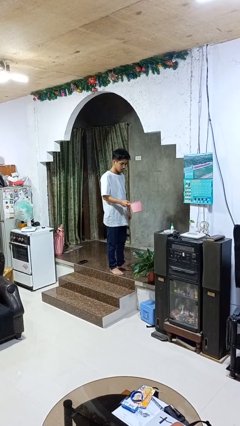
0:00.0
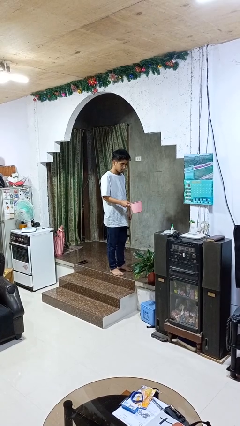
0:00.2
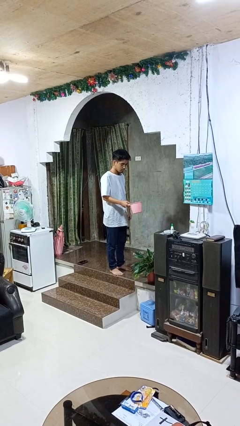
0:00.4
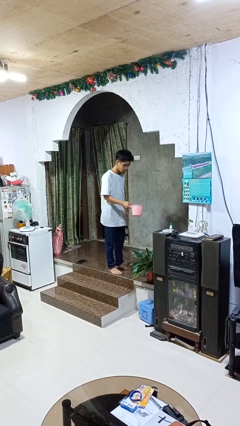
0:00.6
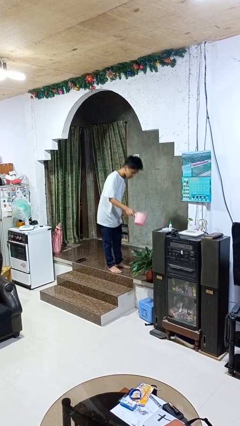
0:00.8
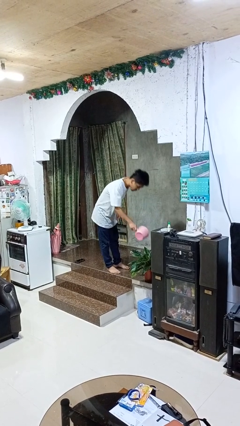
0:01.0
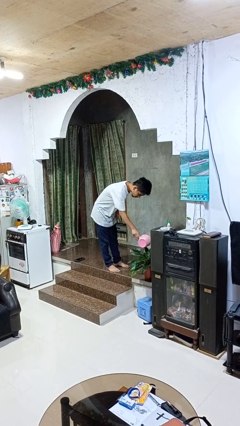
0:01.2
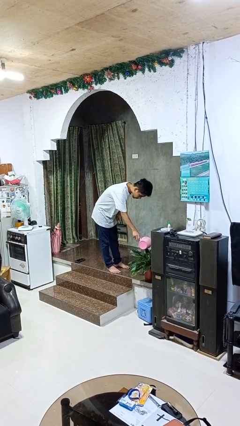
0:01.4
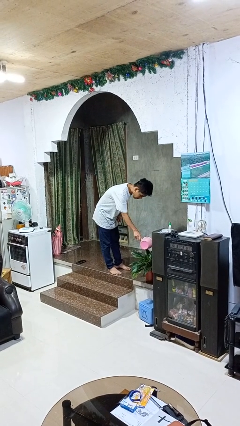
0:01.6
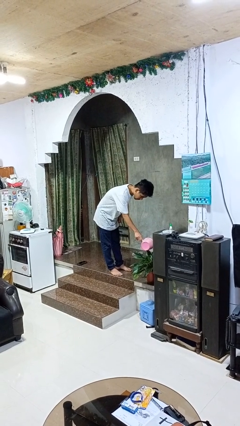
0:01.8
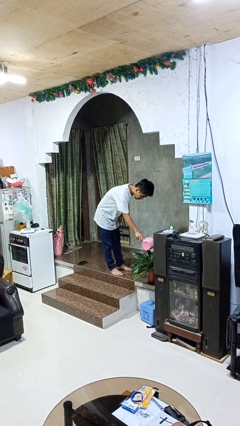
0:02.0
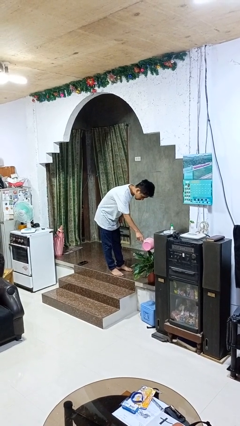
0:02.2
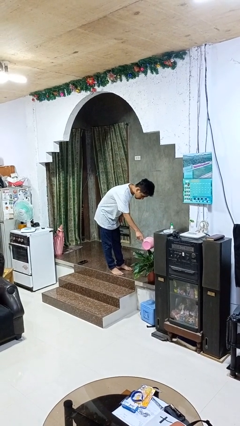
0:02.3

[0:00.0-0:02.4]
person waters houseplant

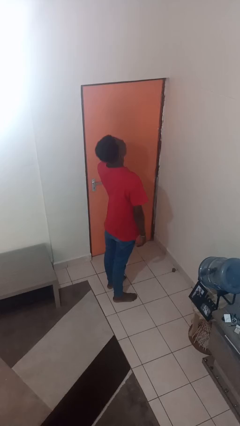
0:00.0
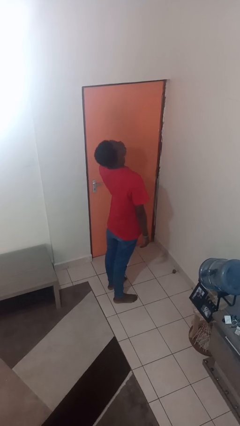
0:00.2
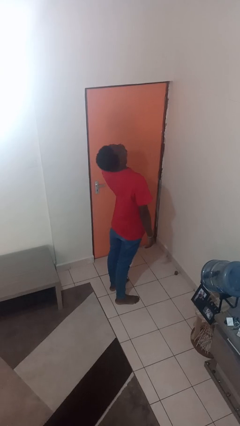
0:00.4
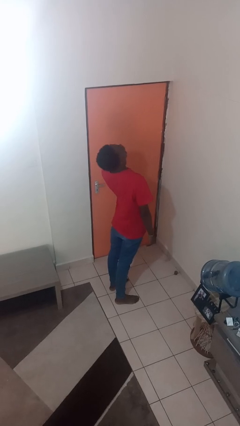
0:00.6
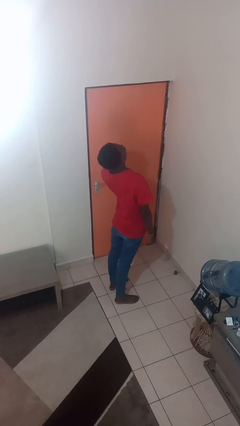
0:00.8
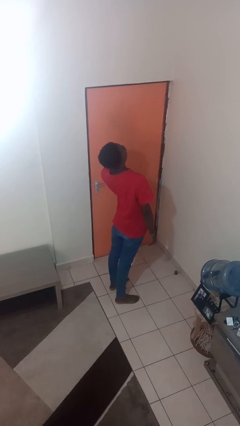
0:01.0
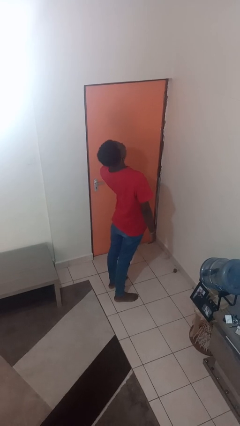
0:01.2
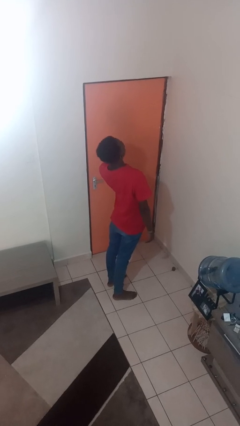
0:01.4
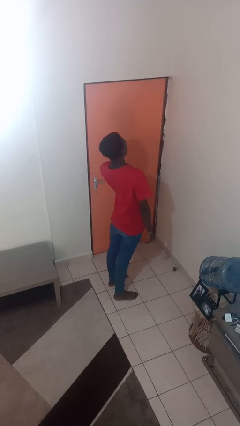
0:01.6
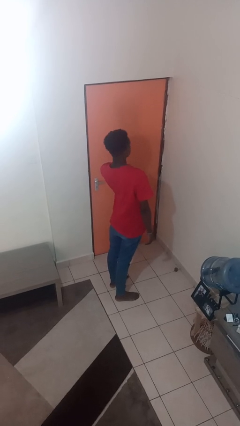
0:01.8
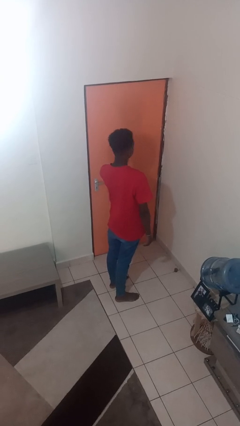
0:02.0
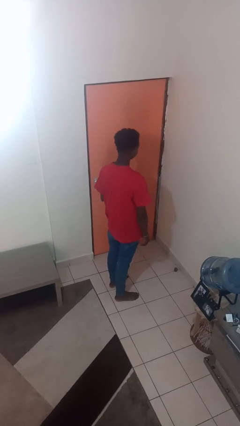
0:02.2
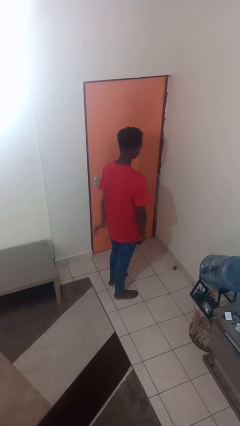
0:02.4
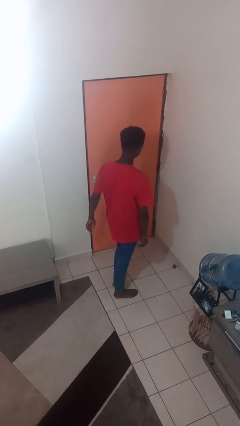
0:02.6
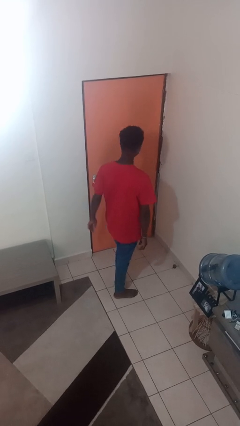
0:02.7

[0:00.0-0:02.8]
person yawns

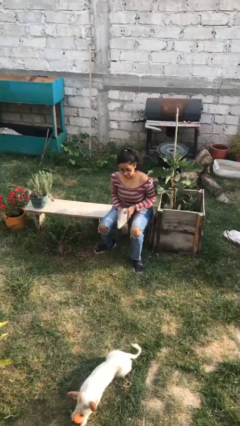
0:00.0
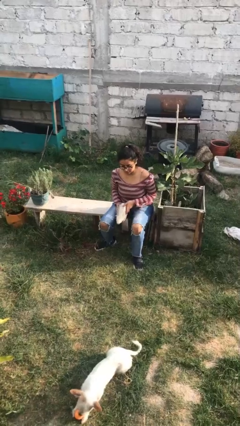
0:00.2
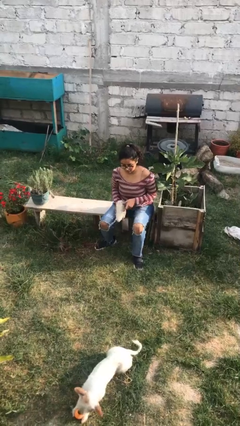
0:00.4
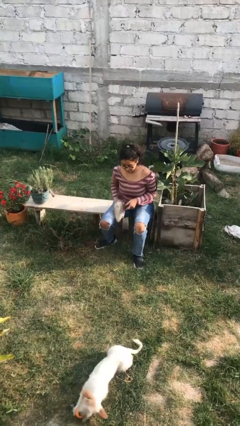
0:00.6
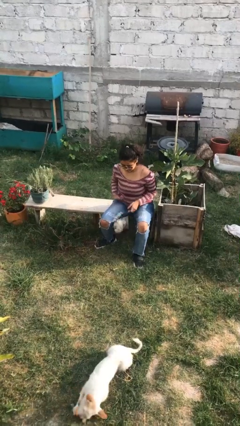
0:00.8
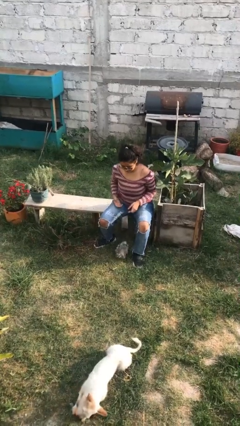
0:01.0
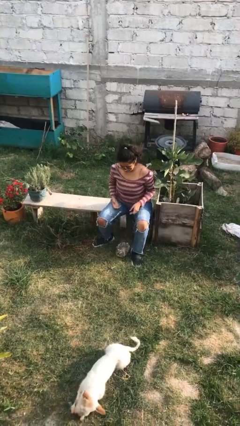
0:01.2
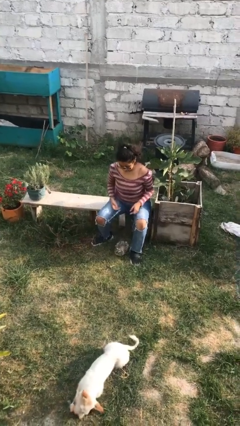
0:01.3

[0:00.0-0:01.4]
person drops object

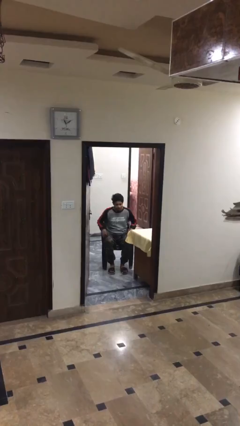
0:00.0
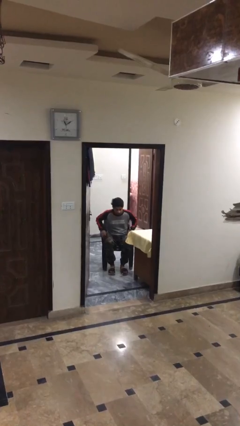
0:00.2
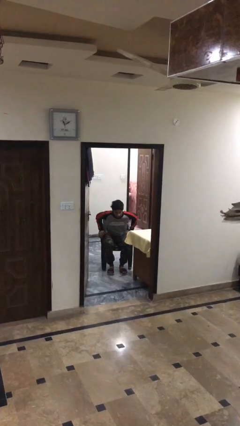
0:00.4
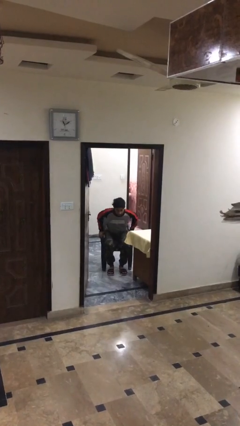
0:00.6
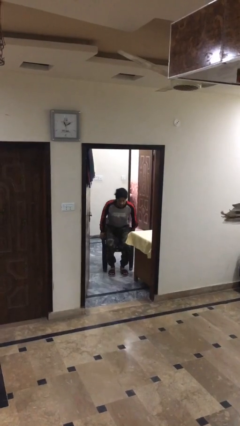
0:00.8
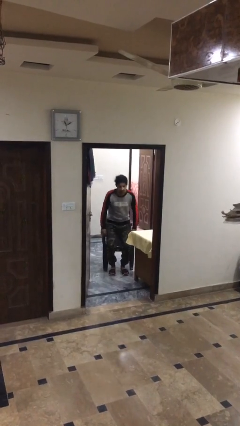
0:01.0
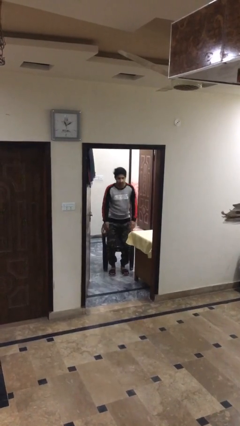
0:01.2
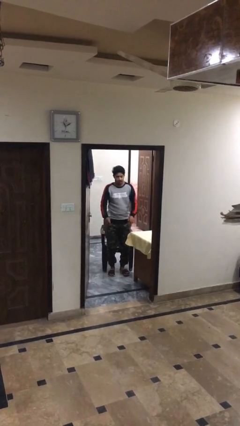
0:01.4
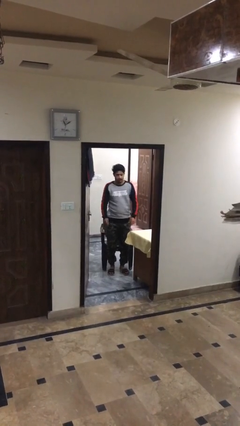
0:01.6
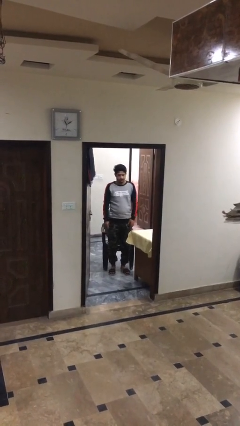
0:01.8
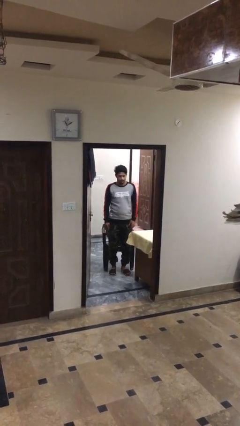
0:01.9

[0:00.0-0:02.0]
person stands up

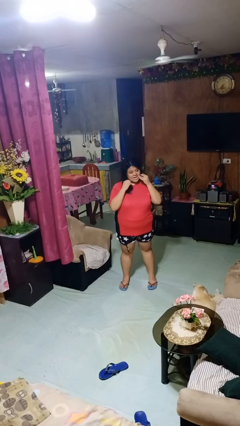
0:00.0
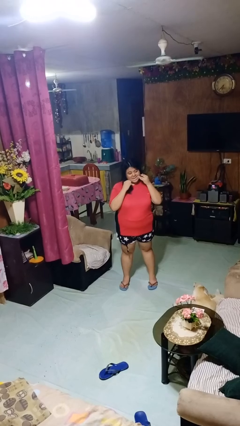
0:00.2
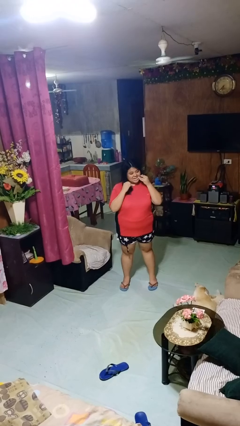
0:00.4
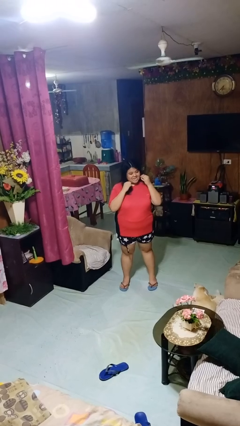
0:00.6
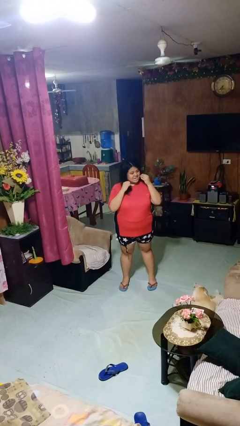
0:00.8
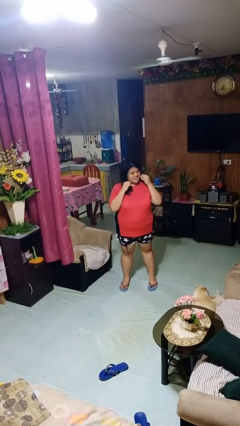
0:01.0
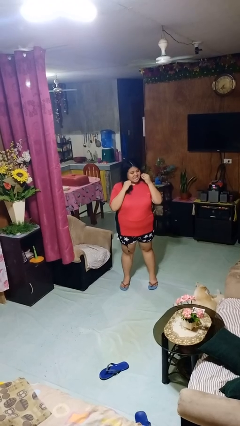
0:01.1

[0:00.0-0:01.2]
person flosses

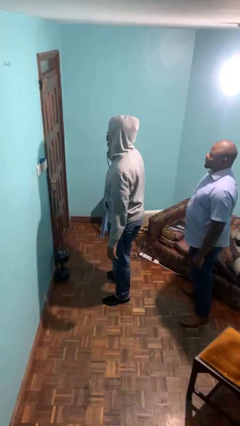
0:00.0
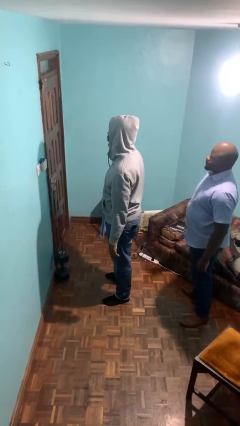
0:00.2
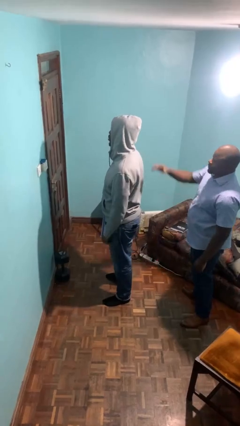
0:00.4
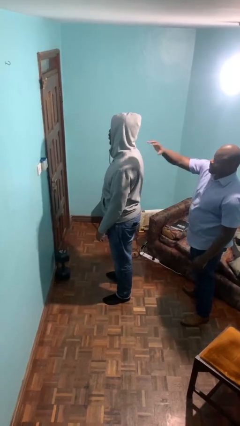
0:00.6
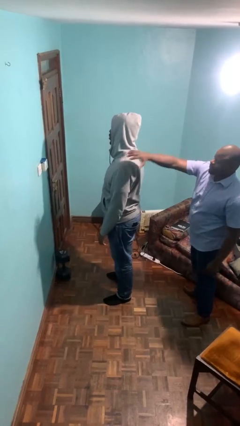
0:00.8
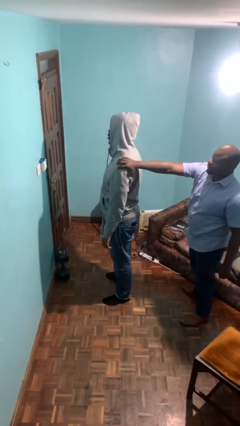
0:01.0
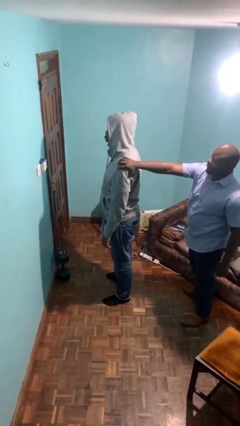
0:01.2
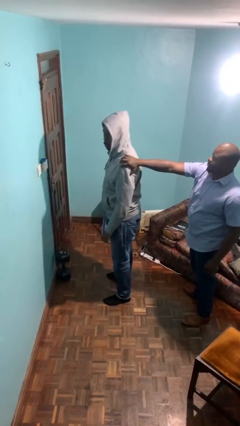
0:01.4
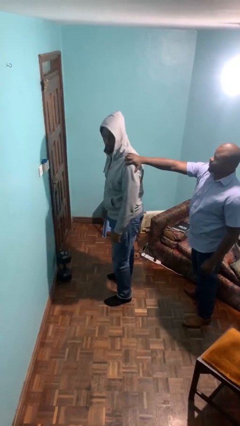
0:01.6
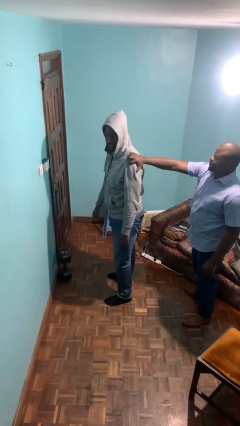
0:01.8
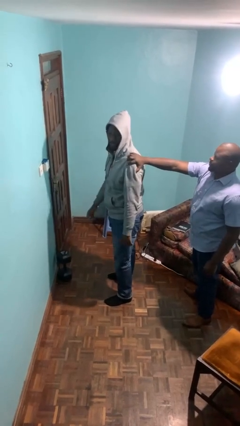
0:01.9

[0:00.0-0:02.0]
person grabs person by shoulder

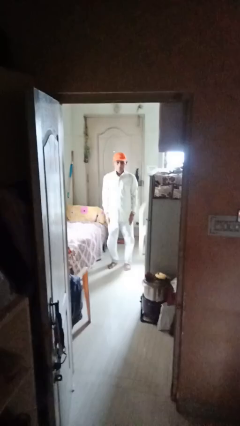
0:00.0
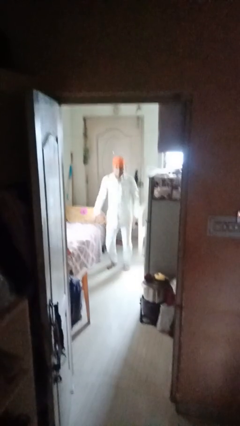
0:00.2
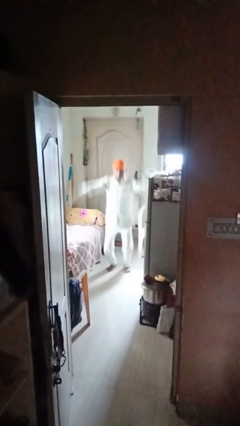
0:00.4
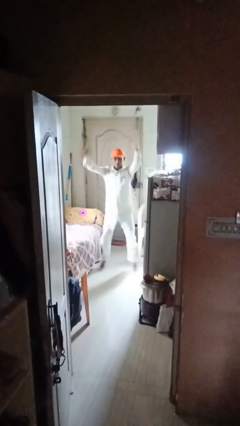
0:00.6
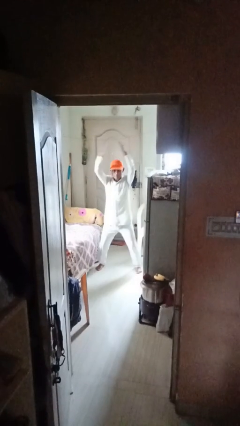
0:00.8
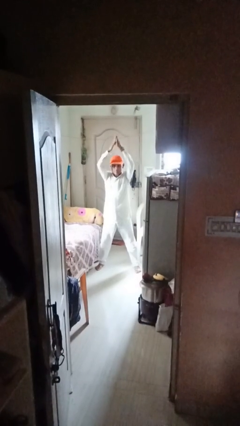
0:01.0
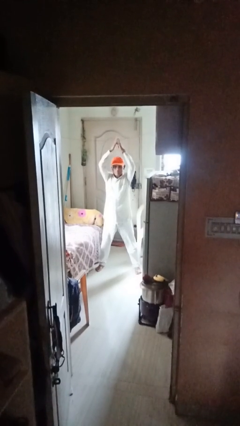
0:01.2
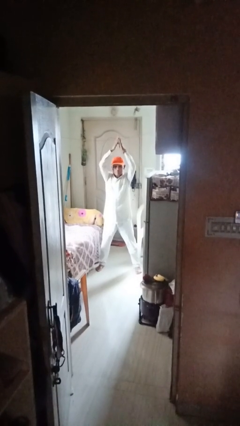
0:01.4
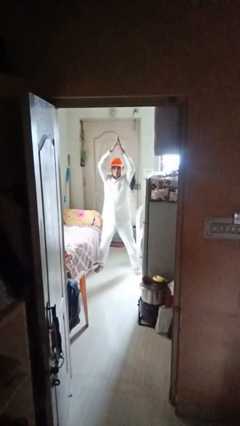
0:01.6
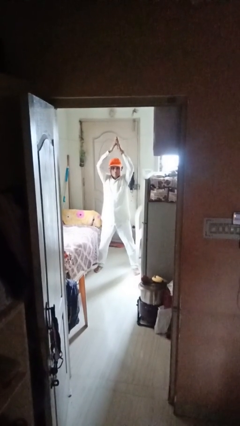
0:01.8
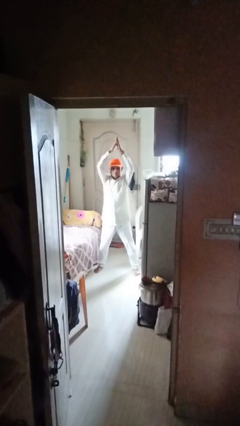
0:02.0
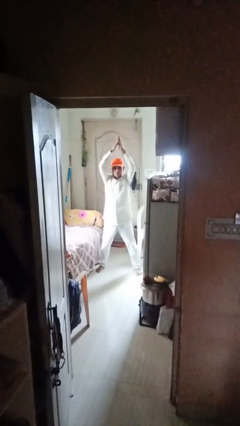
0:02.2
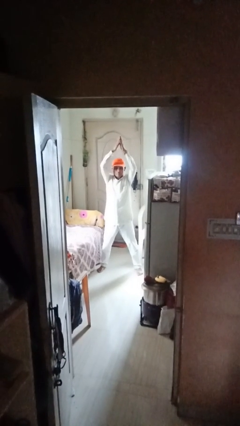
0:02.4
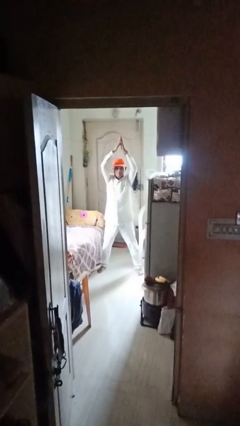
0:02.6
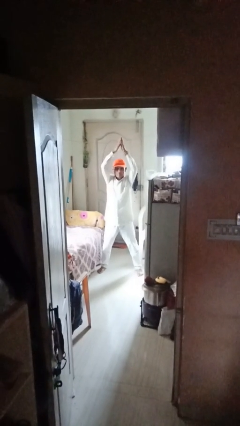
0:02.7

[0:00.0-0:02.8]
person exercises with jumping jacks

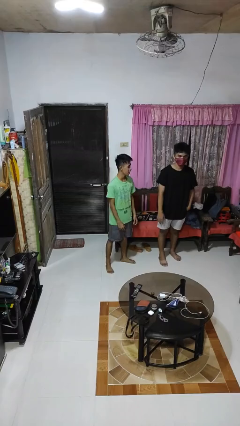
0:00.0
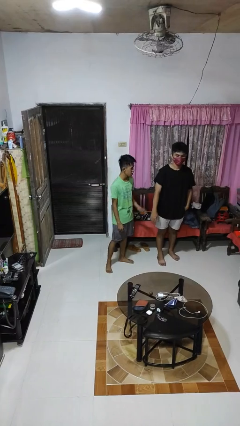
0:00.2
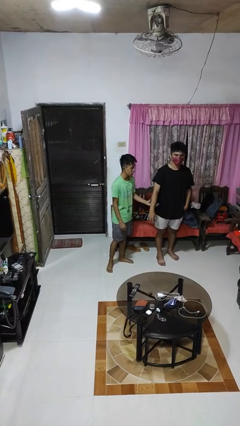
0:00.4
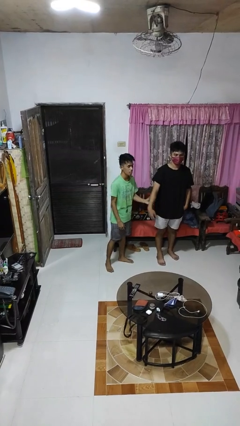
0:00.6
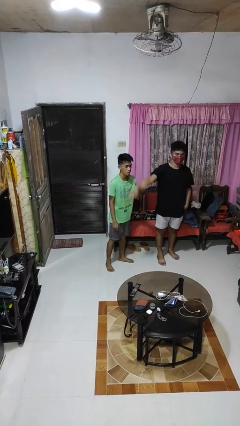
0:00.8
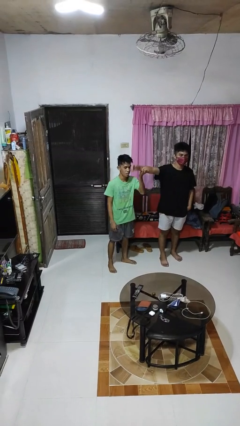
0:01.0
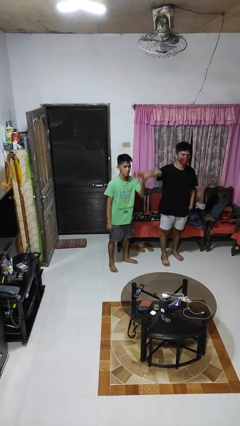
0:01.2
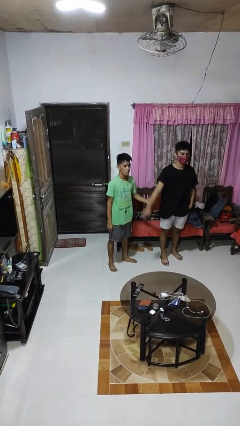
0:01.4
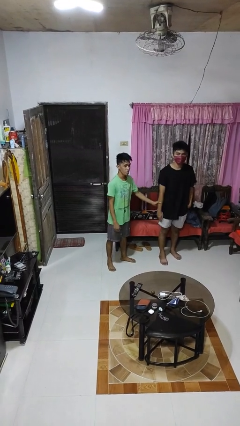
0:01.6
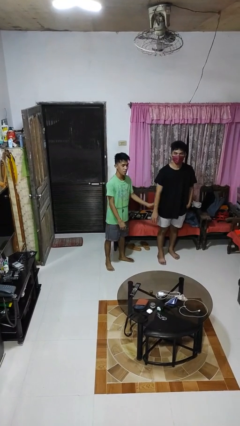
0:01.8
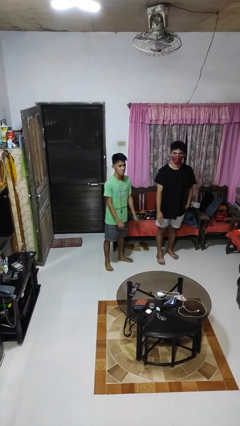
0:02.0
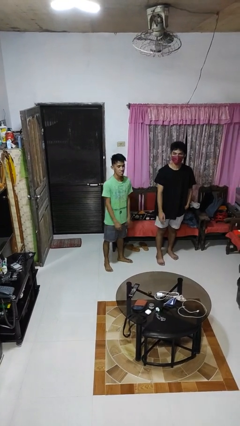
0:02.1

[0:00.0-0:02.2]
person grabs person by forearm

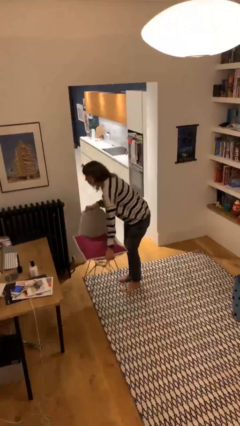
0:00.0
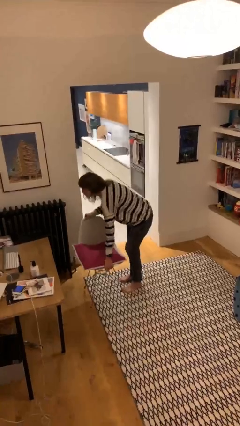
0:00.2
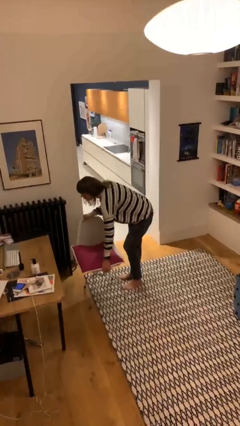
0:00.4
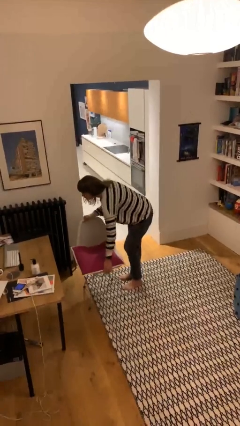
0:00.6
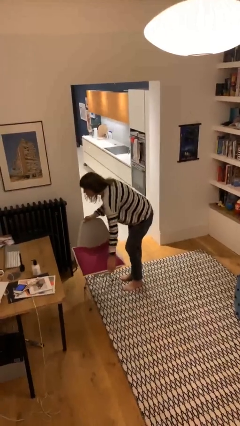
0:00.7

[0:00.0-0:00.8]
person puts down object on floor
